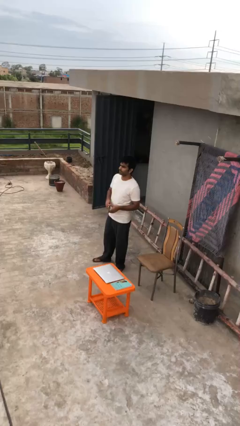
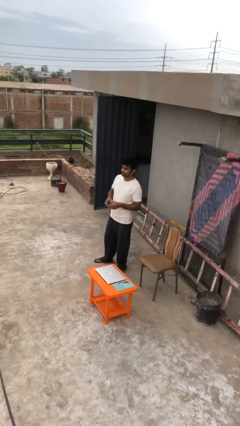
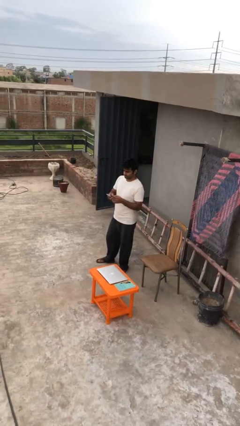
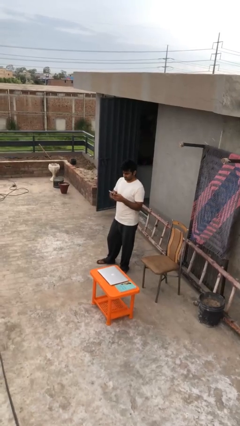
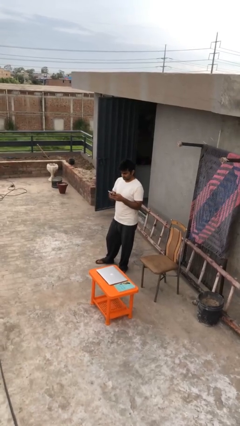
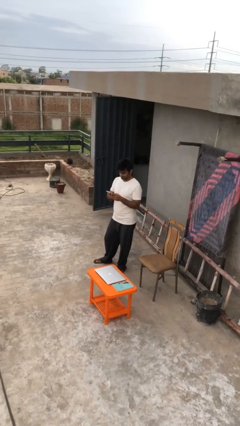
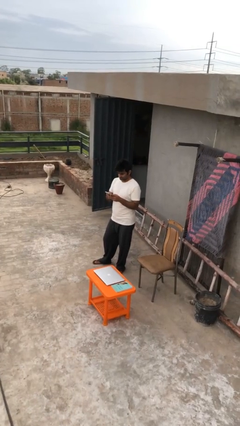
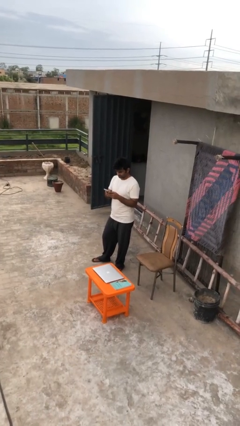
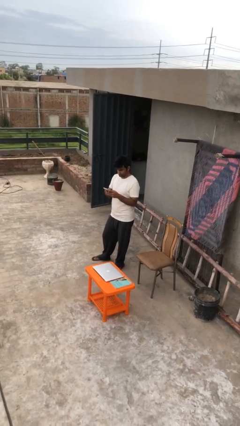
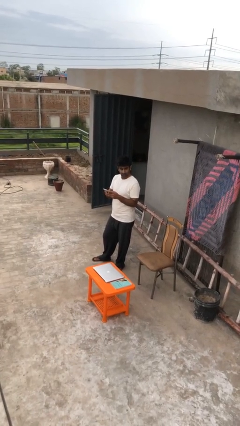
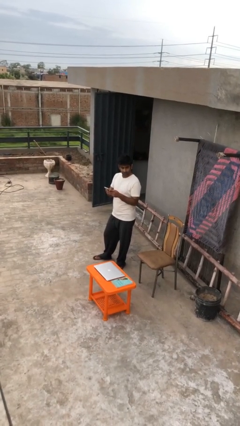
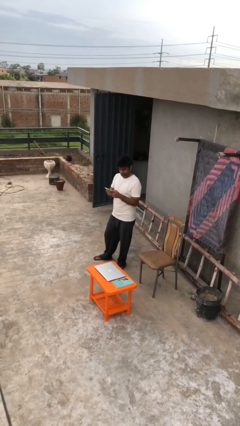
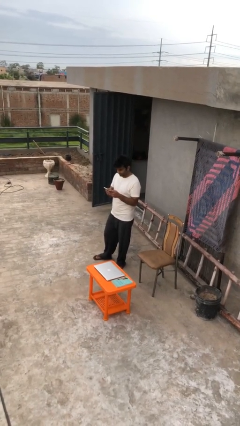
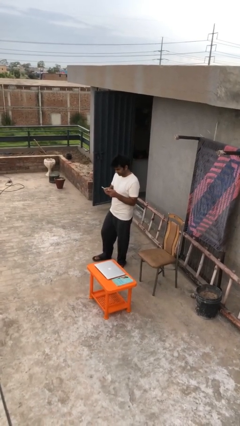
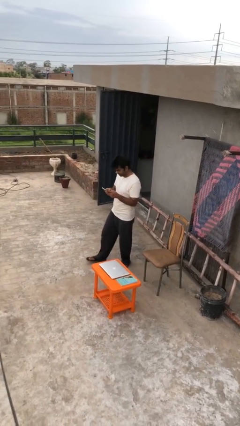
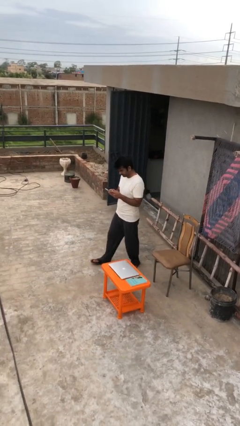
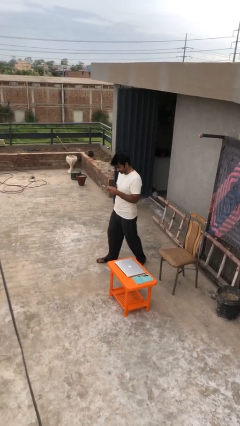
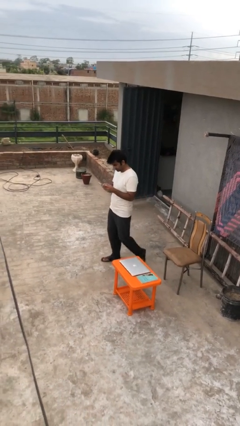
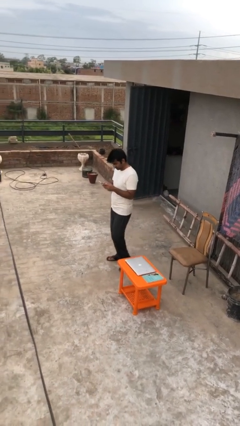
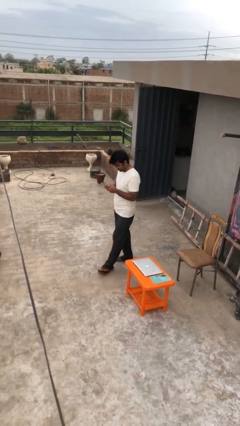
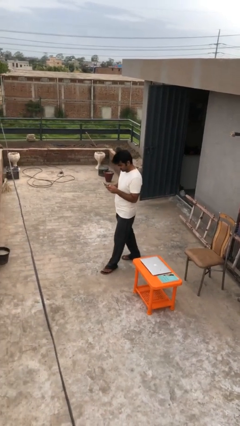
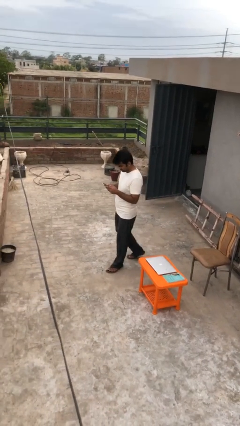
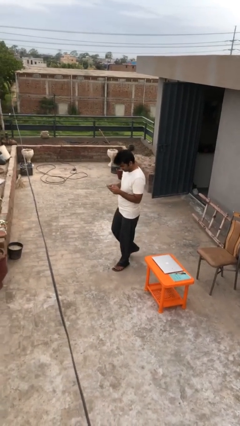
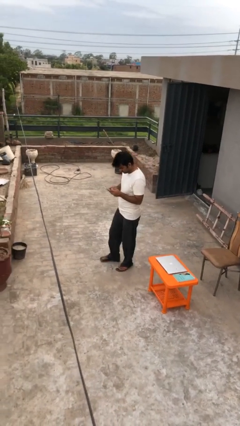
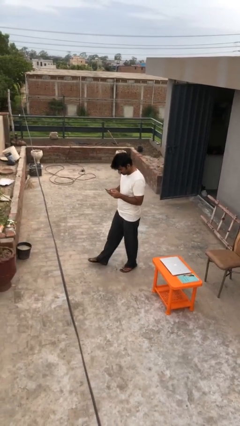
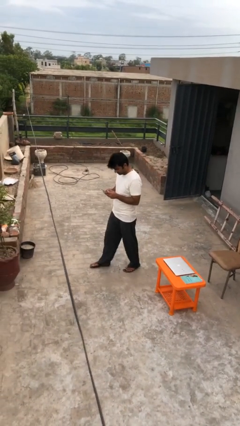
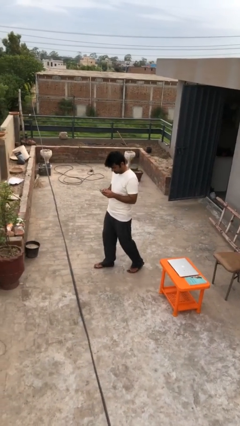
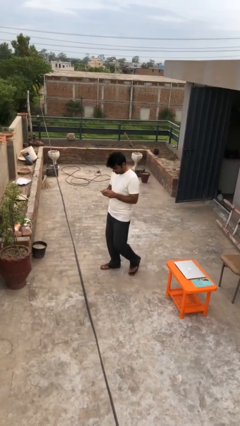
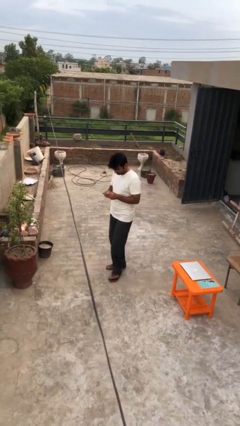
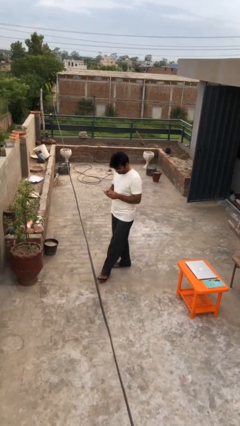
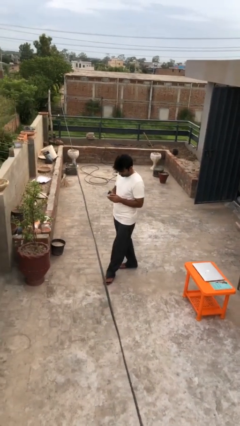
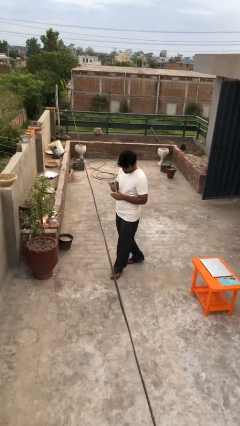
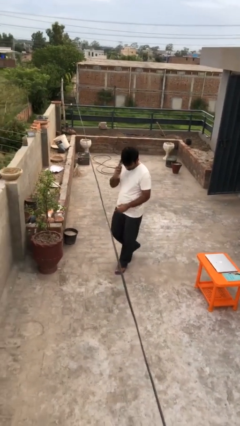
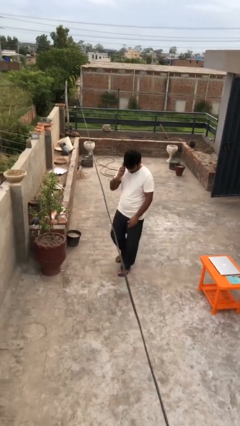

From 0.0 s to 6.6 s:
person texts on phone

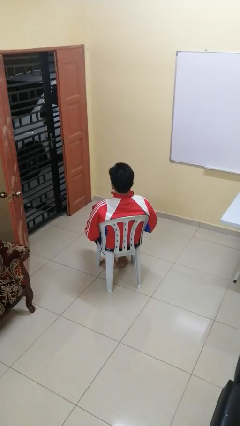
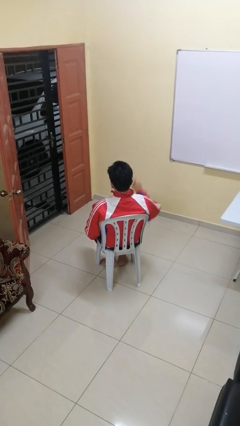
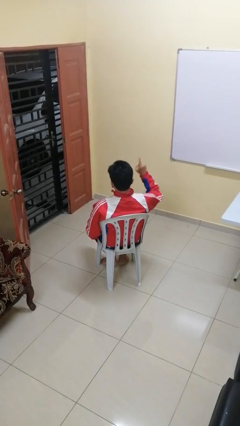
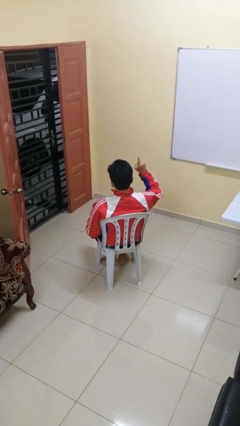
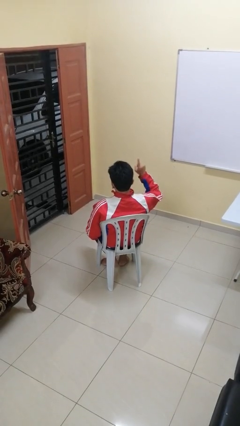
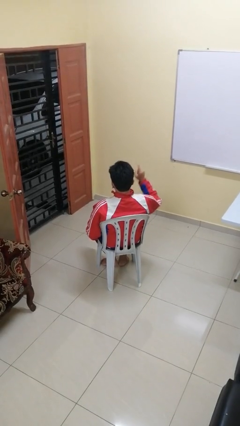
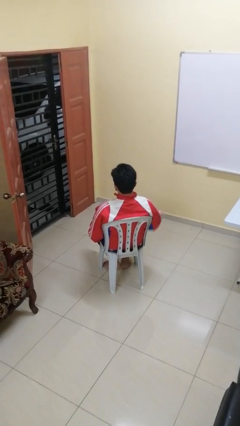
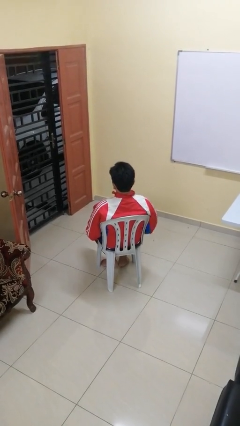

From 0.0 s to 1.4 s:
person gestures number one

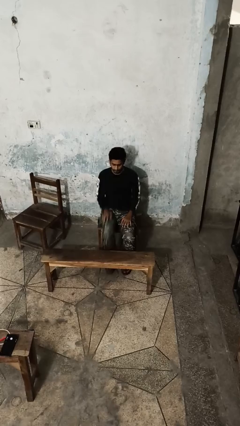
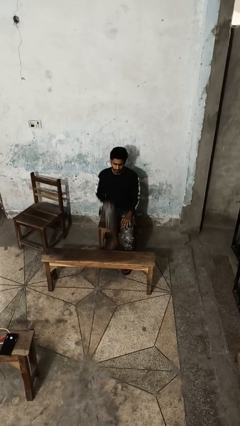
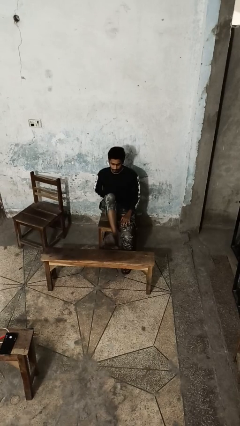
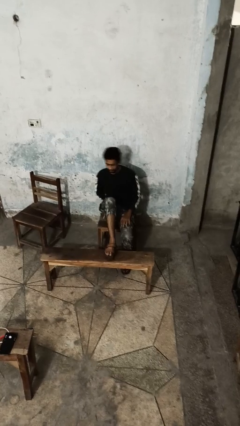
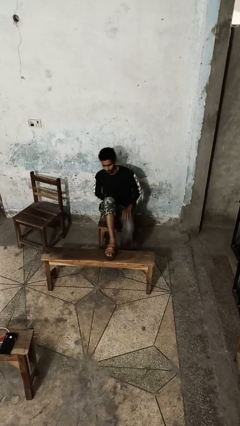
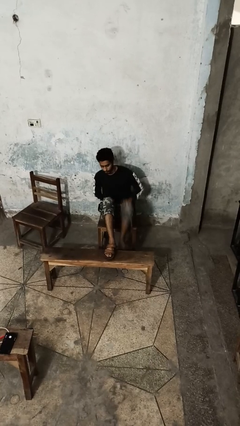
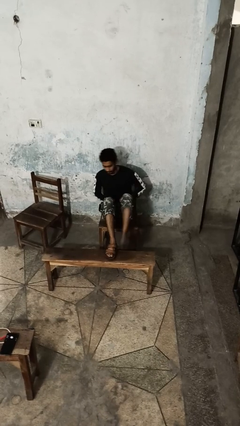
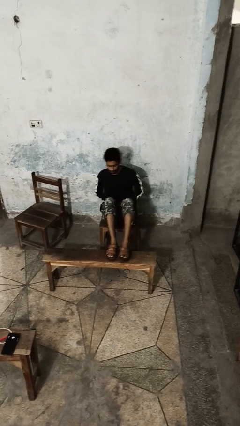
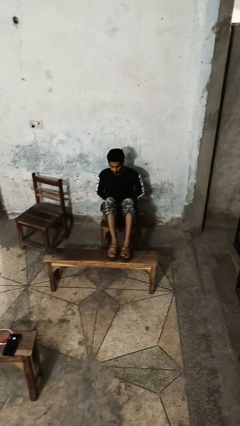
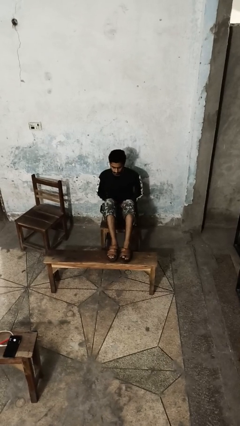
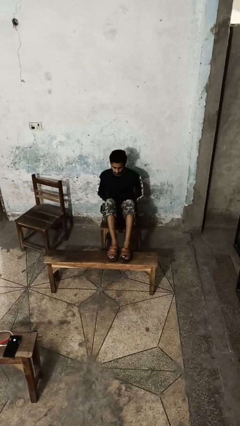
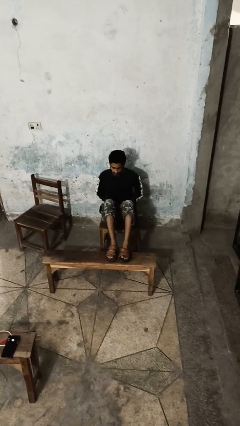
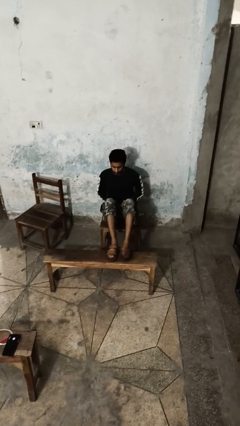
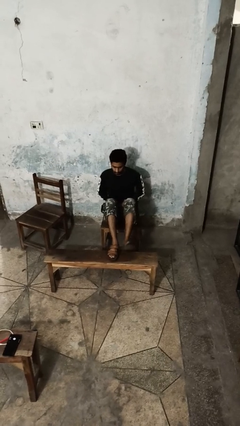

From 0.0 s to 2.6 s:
person puts feet up

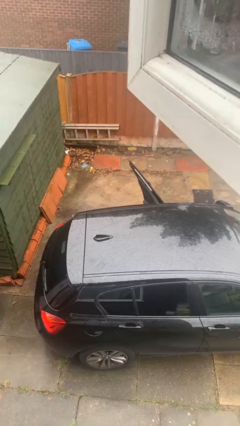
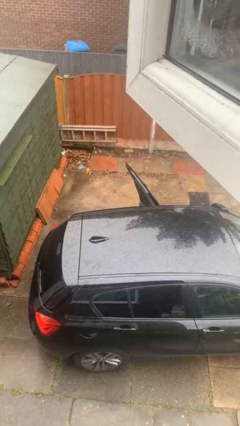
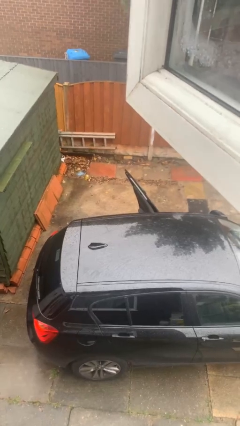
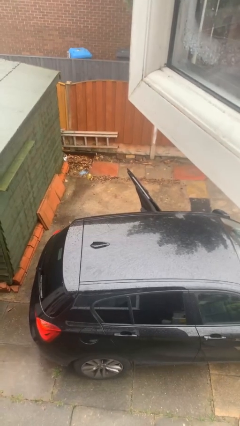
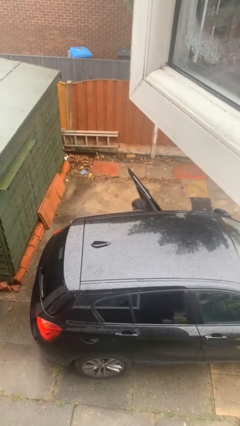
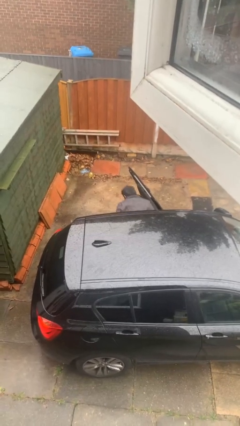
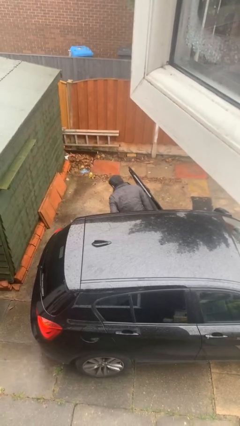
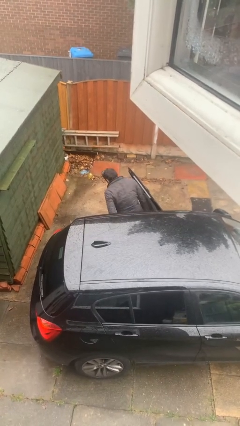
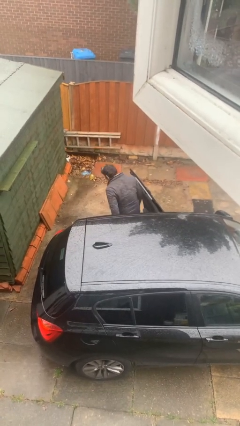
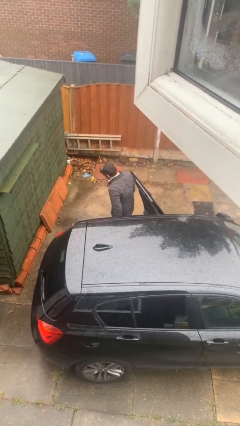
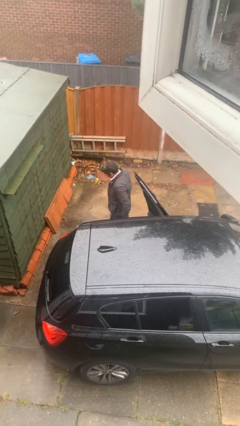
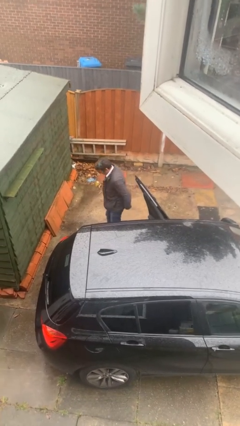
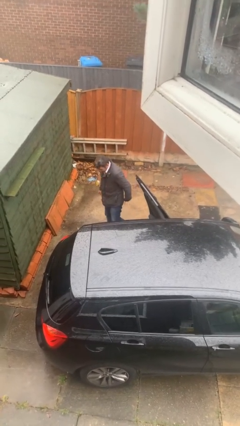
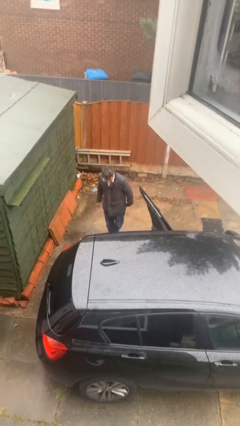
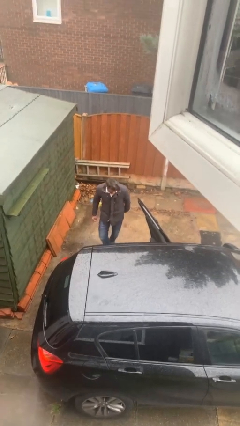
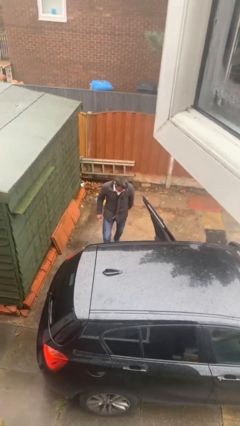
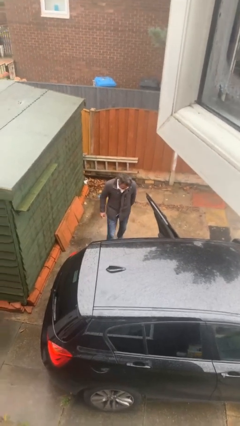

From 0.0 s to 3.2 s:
person exits car

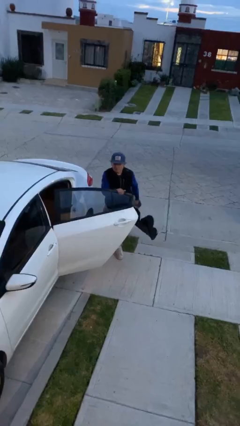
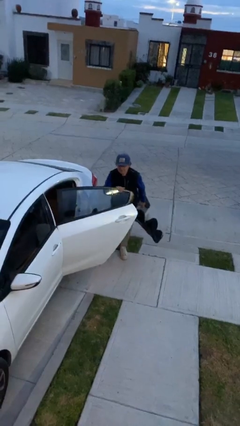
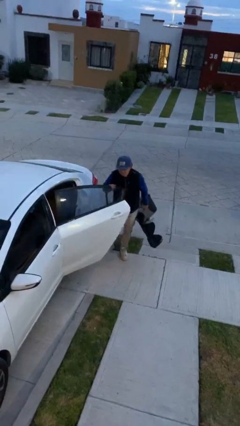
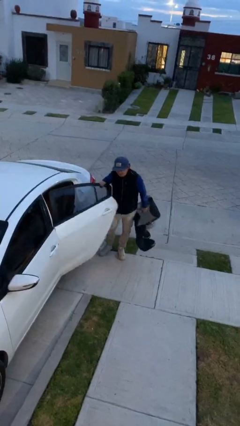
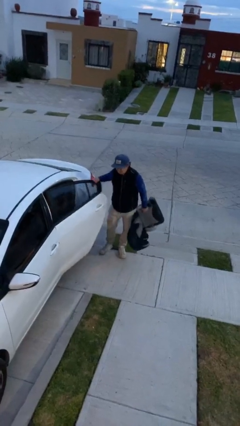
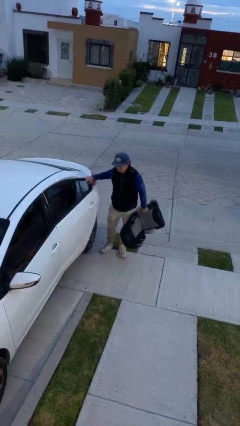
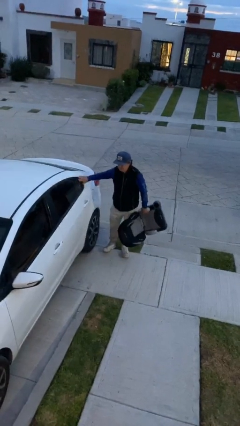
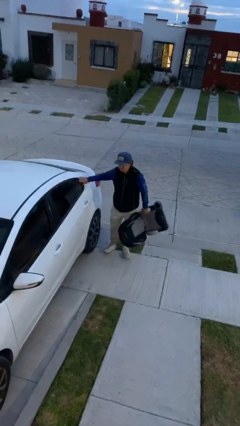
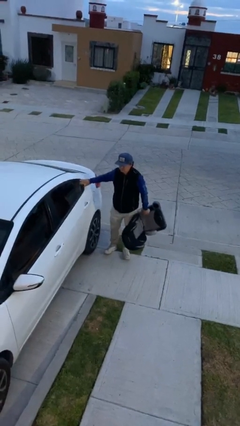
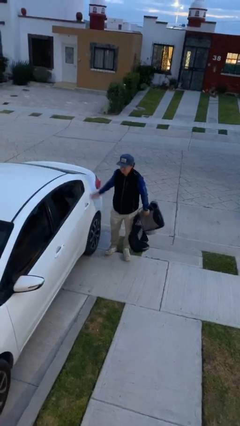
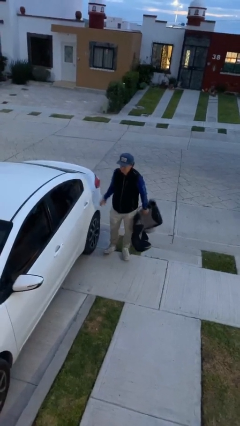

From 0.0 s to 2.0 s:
person closes car door

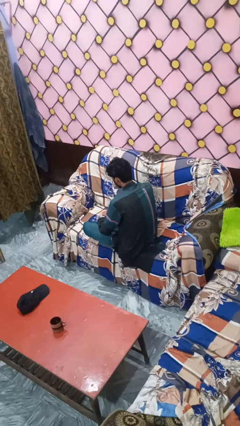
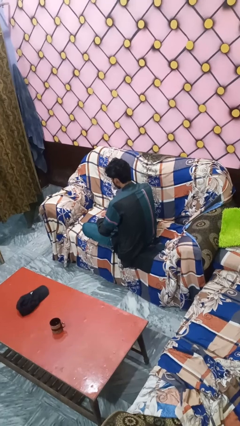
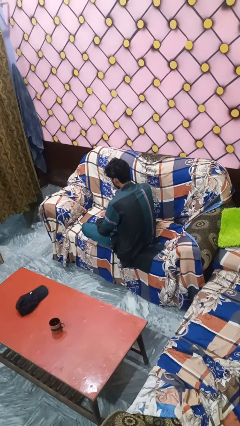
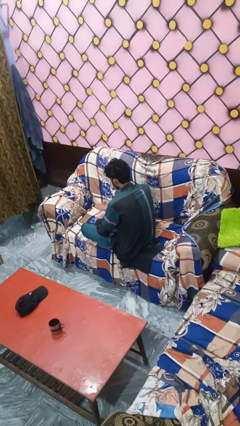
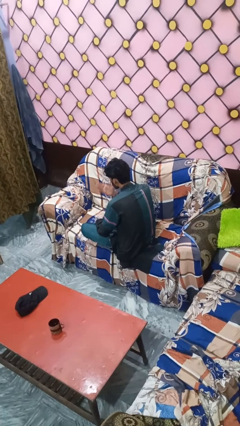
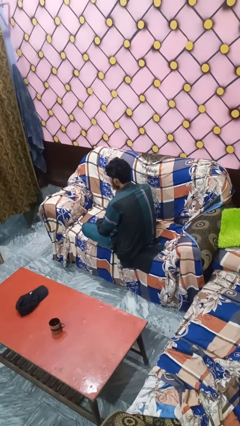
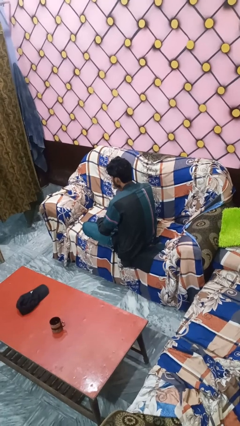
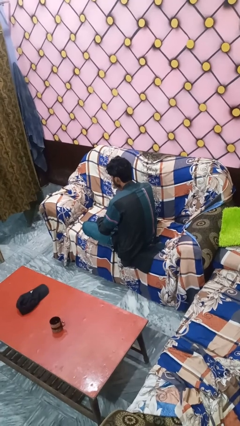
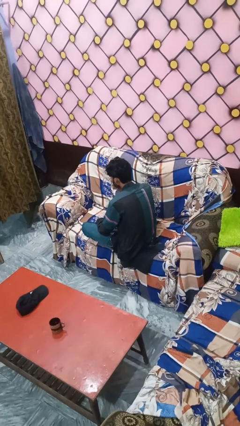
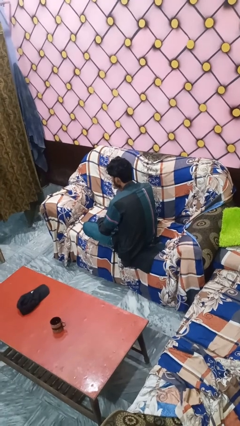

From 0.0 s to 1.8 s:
person gestures blow kiss
